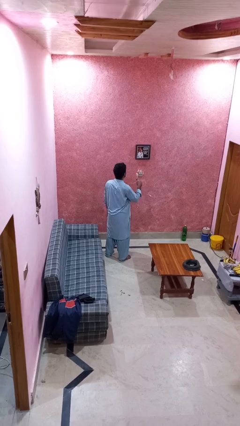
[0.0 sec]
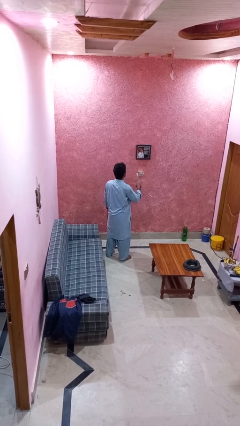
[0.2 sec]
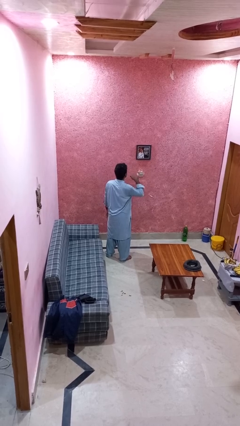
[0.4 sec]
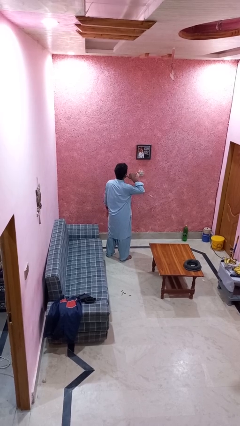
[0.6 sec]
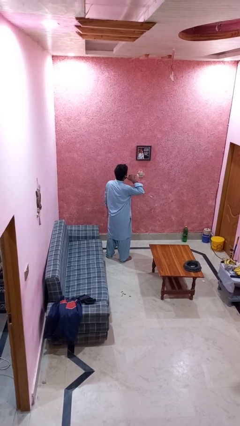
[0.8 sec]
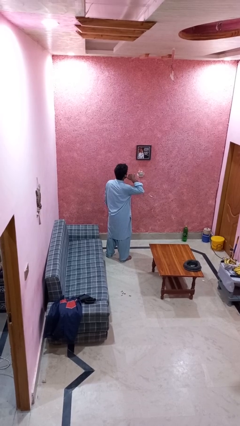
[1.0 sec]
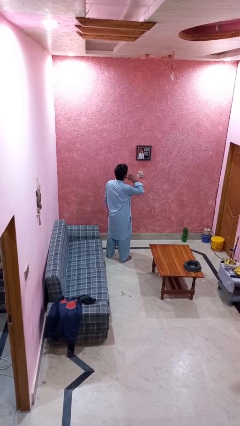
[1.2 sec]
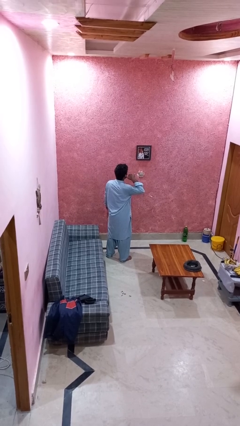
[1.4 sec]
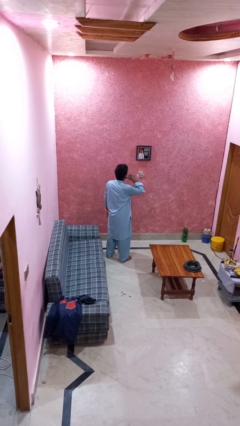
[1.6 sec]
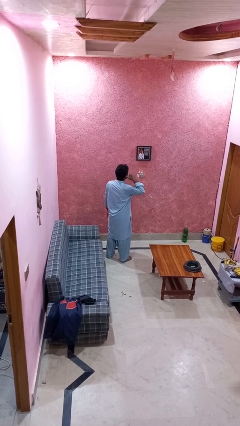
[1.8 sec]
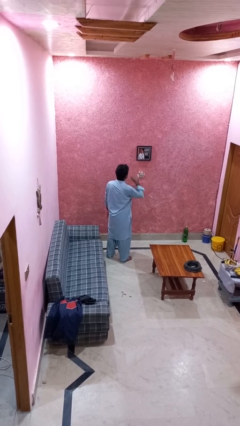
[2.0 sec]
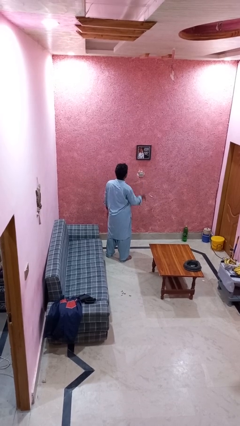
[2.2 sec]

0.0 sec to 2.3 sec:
person gestures call me

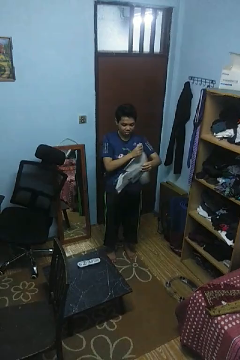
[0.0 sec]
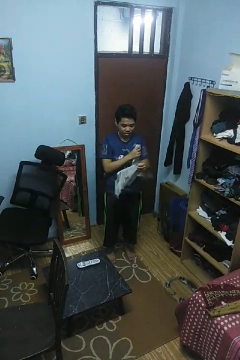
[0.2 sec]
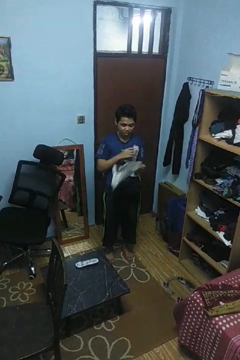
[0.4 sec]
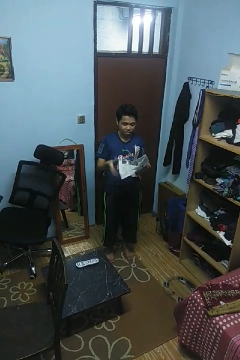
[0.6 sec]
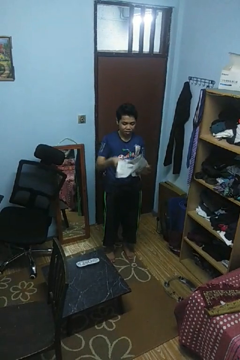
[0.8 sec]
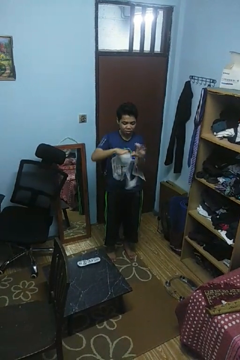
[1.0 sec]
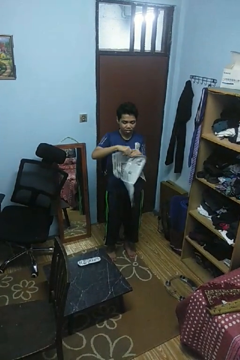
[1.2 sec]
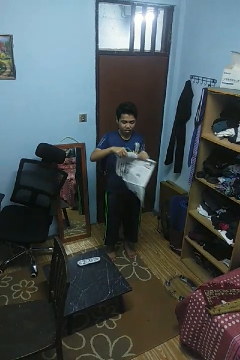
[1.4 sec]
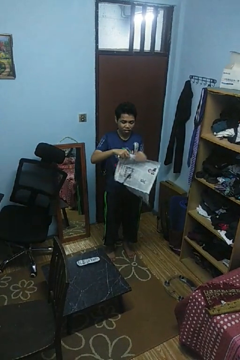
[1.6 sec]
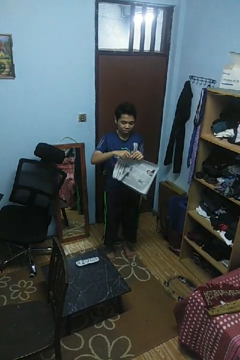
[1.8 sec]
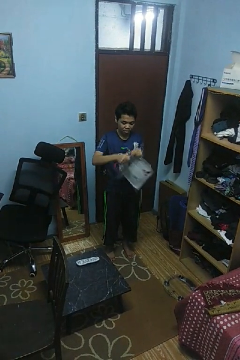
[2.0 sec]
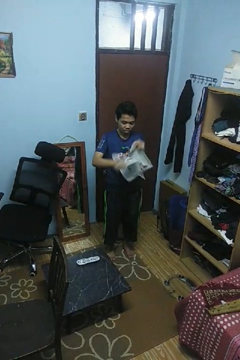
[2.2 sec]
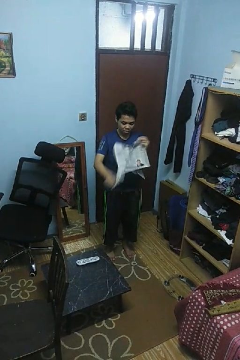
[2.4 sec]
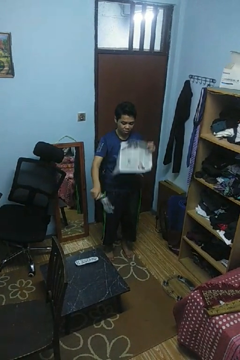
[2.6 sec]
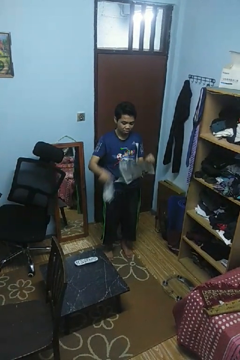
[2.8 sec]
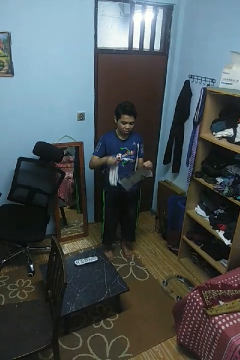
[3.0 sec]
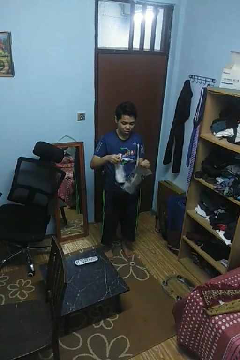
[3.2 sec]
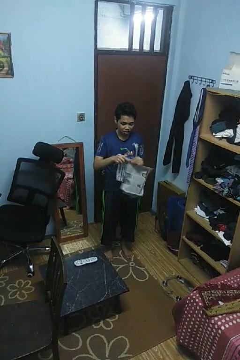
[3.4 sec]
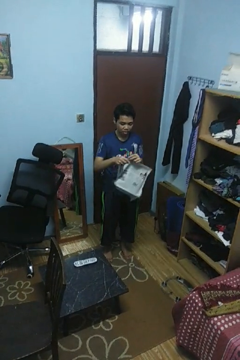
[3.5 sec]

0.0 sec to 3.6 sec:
person tears paper

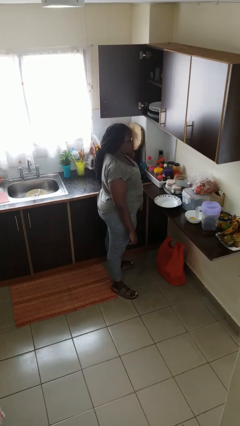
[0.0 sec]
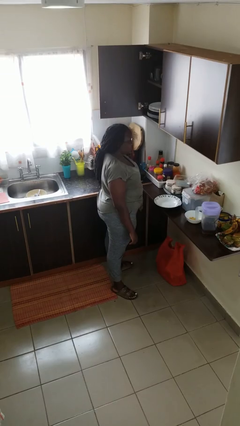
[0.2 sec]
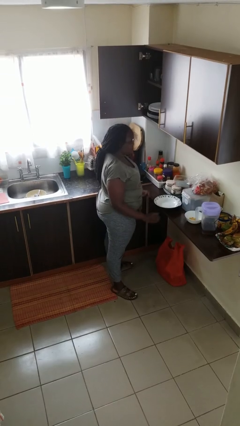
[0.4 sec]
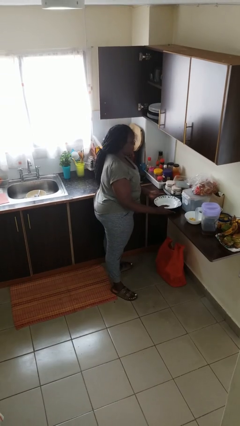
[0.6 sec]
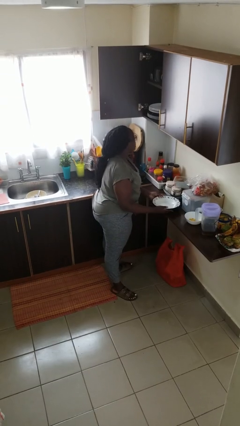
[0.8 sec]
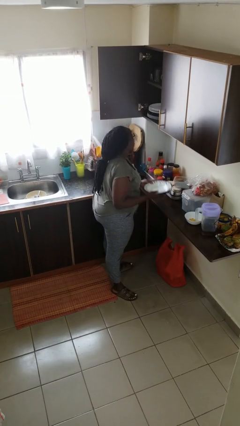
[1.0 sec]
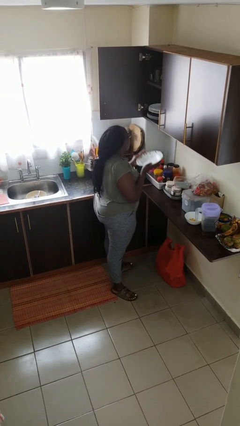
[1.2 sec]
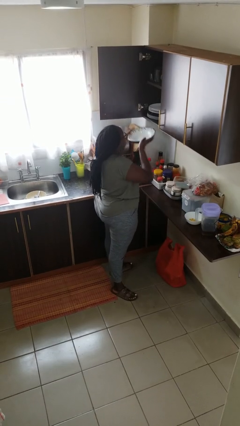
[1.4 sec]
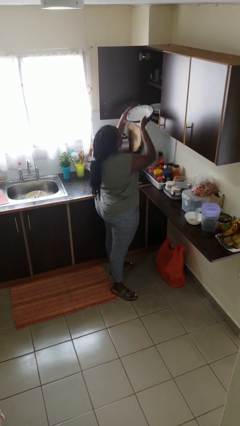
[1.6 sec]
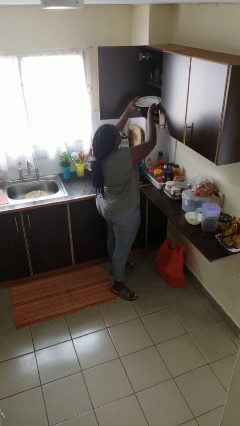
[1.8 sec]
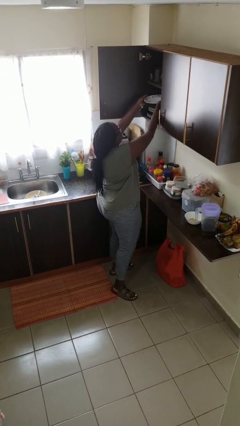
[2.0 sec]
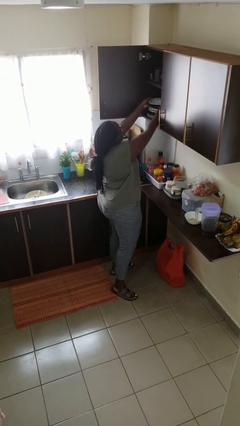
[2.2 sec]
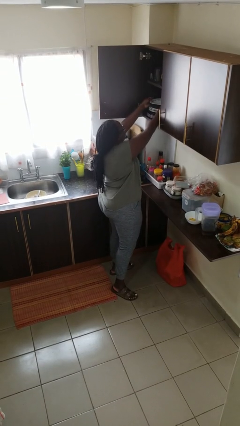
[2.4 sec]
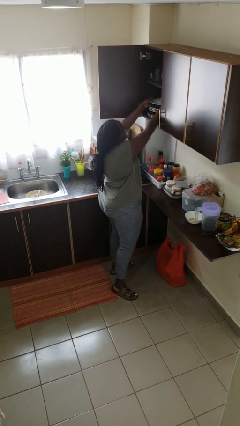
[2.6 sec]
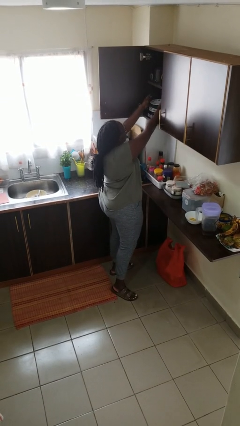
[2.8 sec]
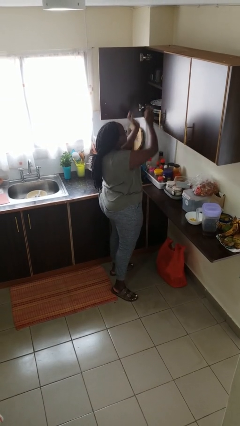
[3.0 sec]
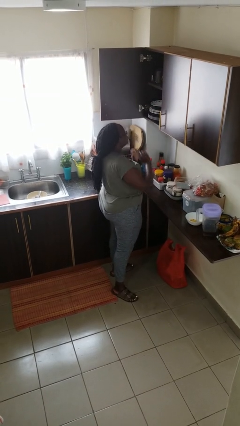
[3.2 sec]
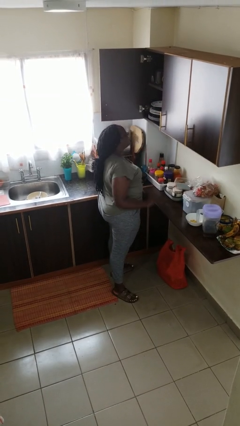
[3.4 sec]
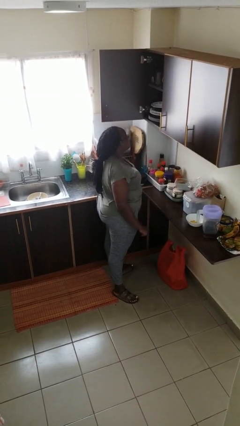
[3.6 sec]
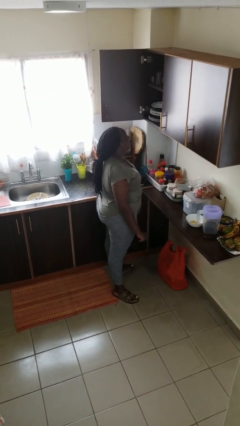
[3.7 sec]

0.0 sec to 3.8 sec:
person puts object in cabinet

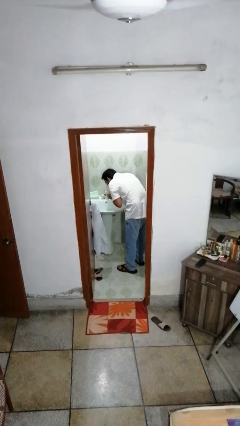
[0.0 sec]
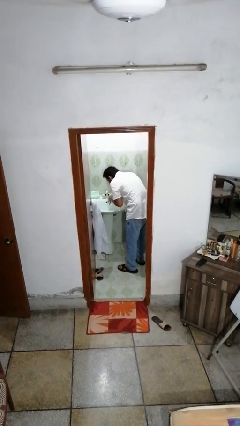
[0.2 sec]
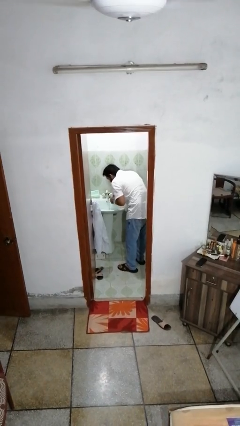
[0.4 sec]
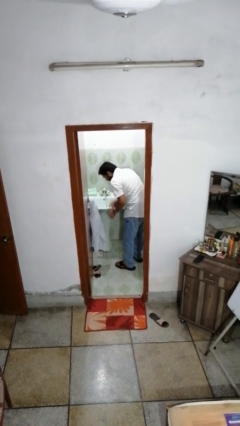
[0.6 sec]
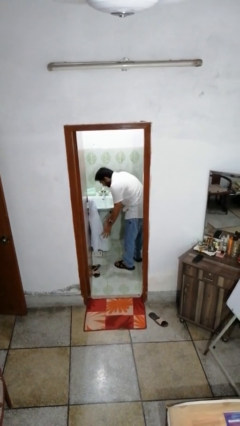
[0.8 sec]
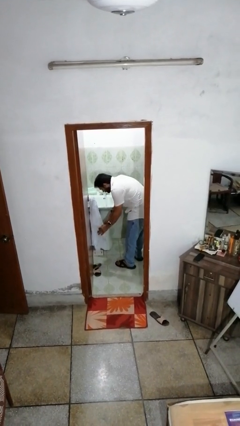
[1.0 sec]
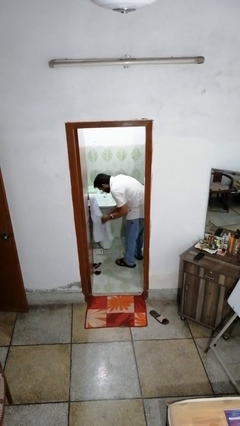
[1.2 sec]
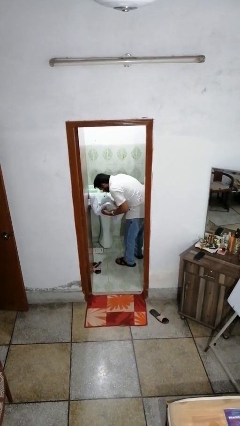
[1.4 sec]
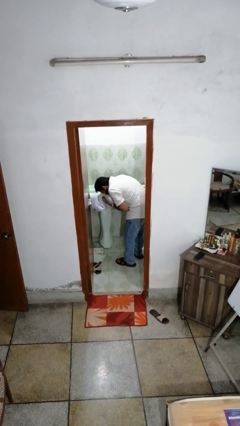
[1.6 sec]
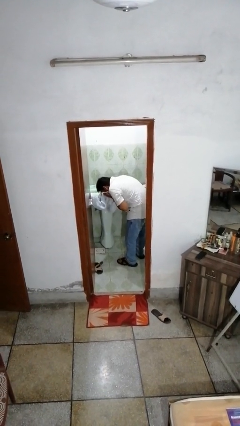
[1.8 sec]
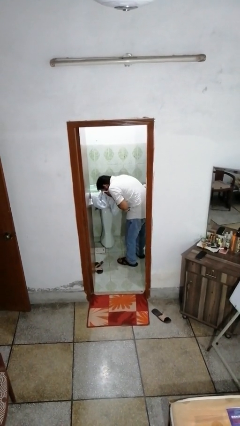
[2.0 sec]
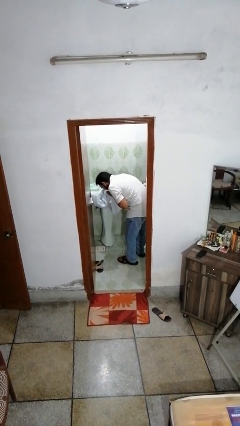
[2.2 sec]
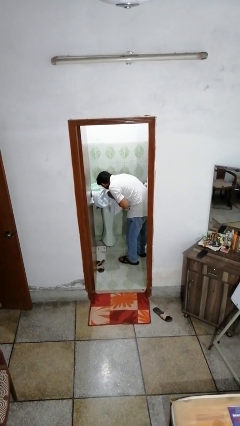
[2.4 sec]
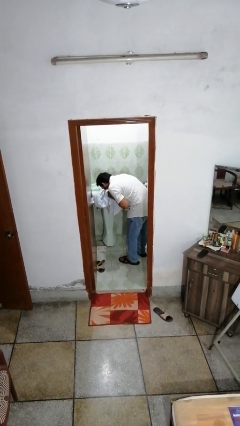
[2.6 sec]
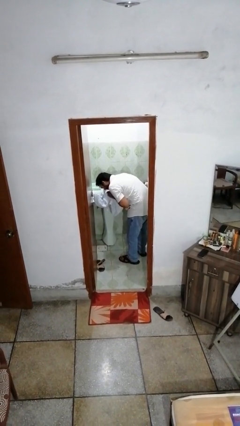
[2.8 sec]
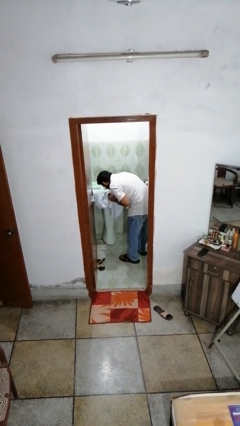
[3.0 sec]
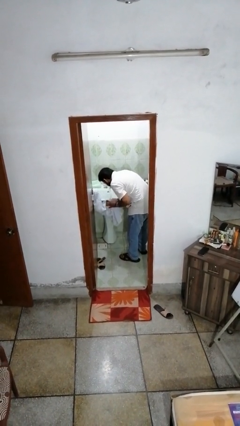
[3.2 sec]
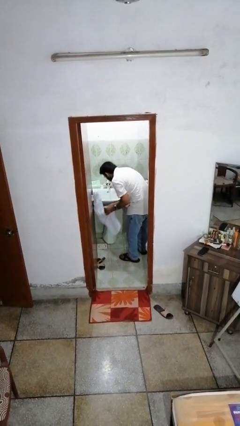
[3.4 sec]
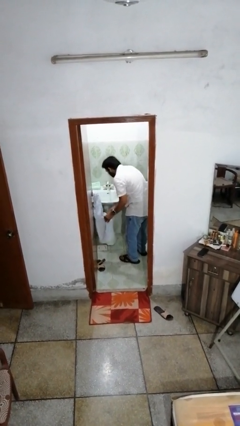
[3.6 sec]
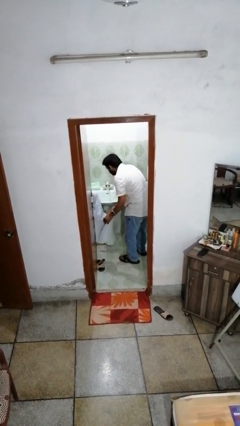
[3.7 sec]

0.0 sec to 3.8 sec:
person dries face with towel

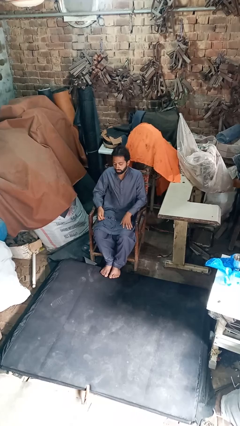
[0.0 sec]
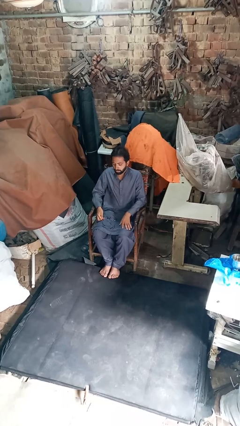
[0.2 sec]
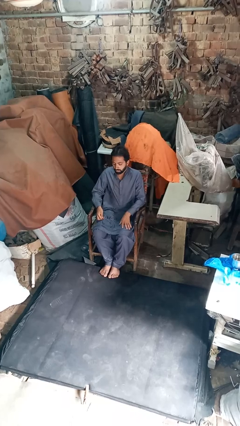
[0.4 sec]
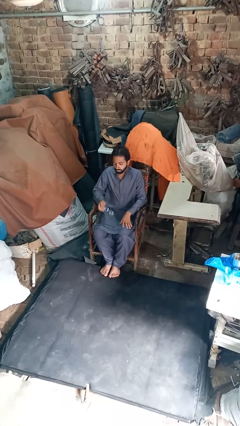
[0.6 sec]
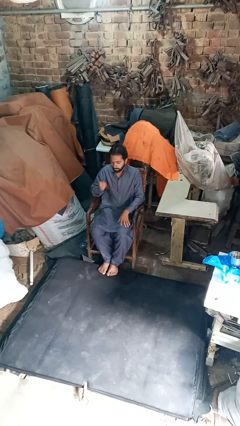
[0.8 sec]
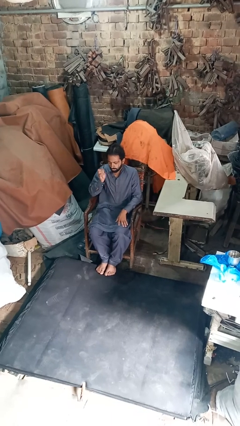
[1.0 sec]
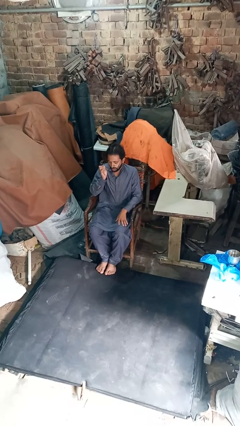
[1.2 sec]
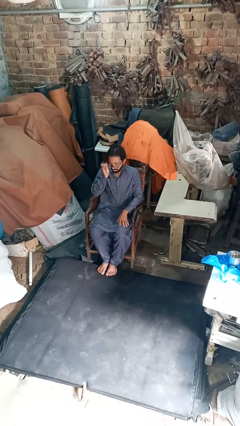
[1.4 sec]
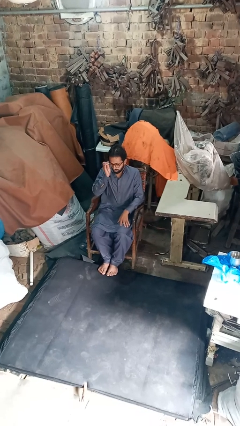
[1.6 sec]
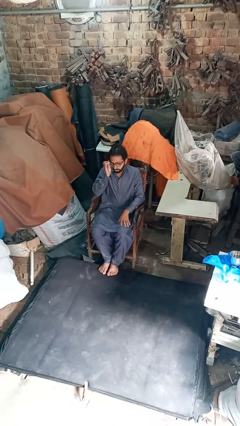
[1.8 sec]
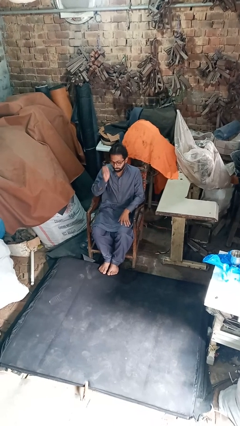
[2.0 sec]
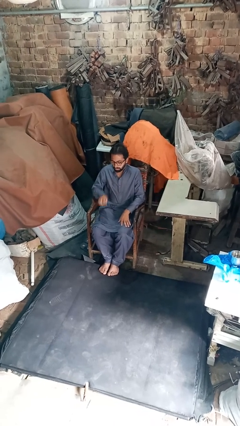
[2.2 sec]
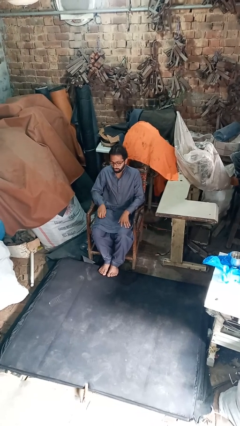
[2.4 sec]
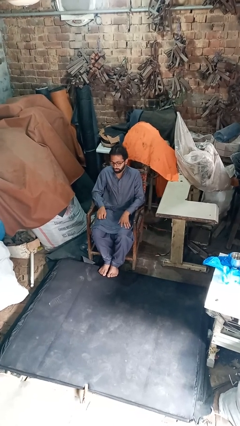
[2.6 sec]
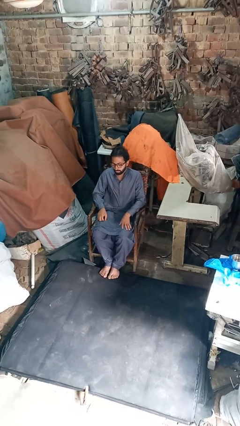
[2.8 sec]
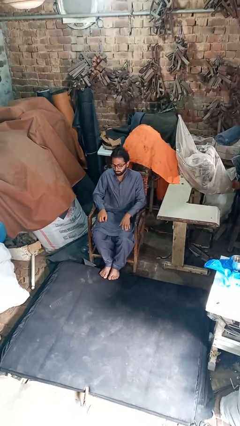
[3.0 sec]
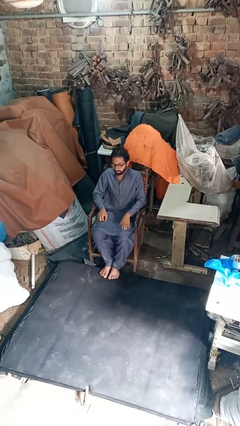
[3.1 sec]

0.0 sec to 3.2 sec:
person puts on glasses

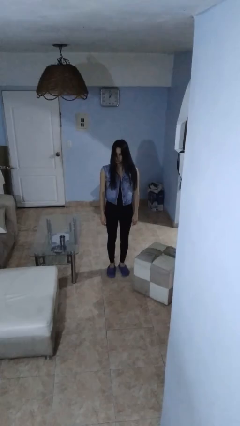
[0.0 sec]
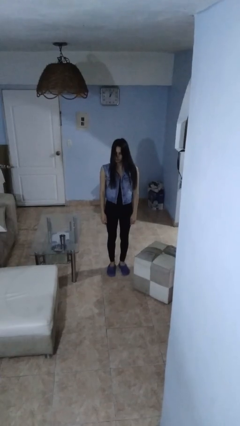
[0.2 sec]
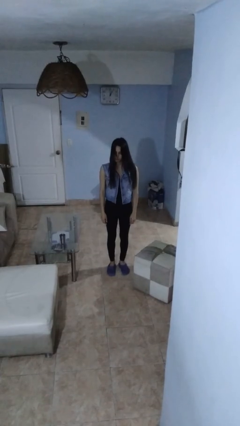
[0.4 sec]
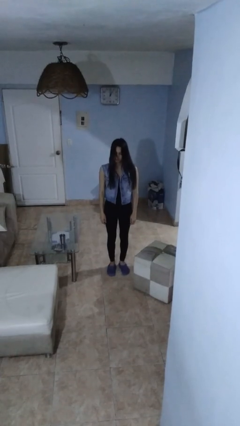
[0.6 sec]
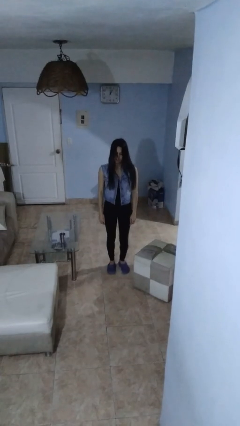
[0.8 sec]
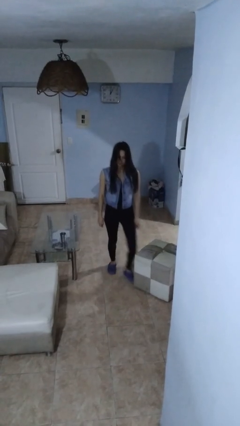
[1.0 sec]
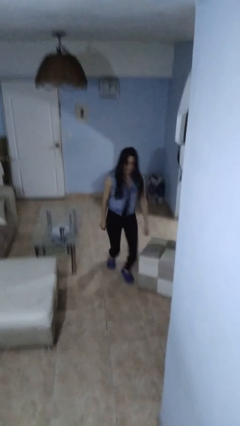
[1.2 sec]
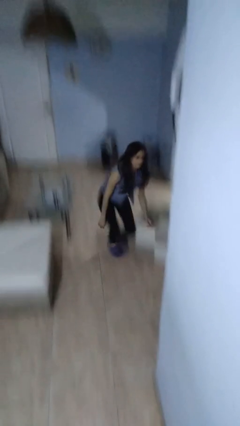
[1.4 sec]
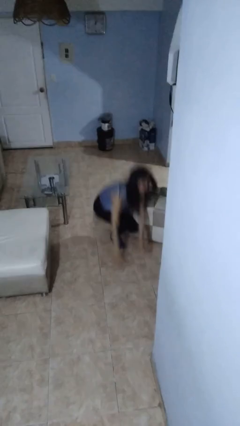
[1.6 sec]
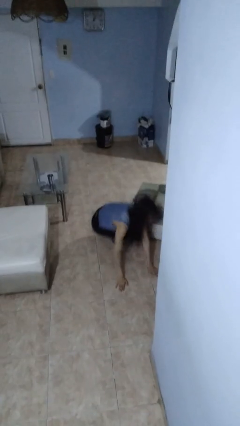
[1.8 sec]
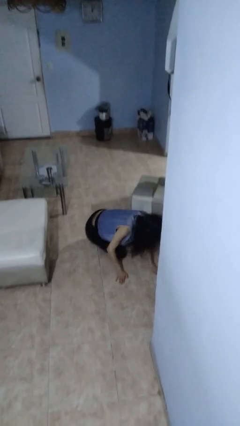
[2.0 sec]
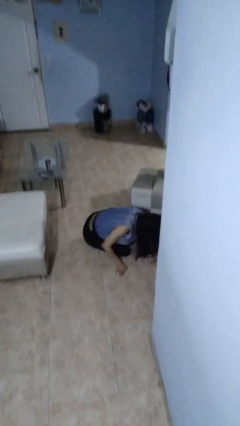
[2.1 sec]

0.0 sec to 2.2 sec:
person trips on object on floor
